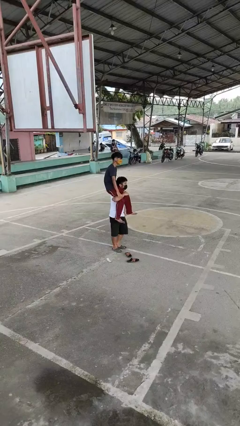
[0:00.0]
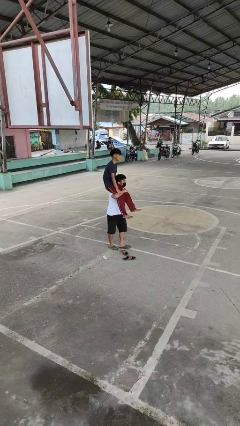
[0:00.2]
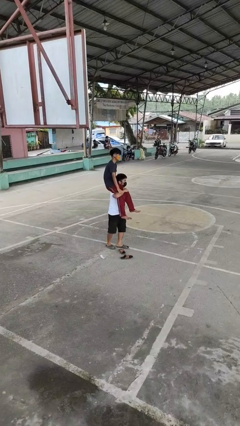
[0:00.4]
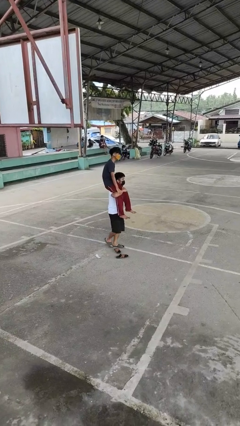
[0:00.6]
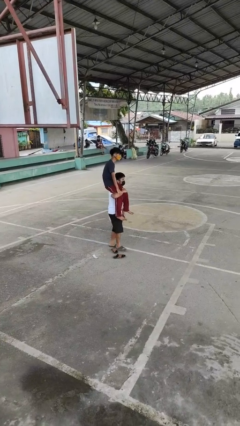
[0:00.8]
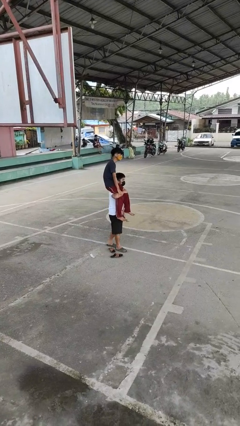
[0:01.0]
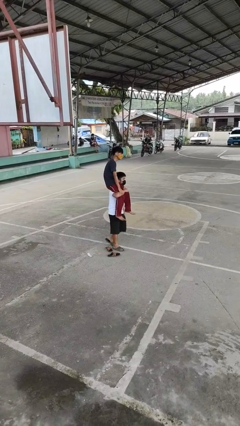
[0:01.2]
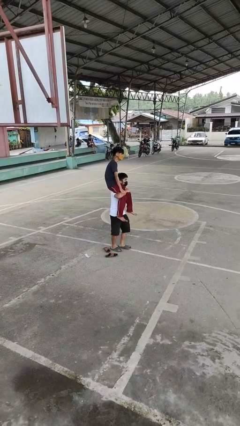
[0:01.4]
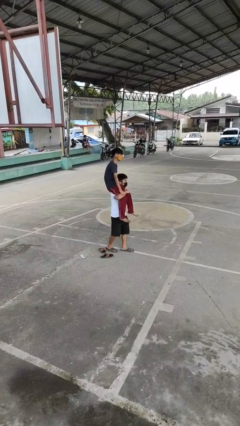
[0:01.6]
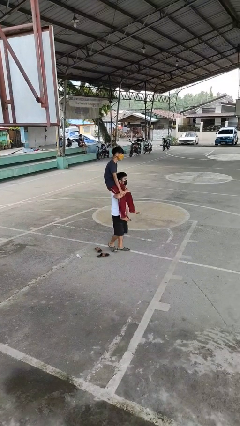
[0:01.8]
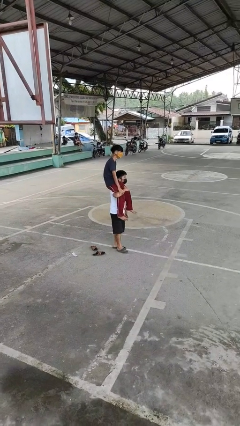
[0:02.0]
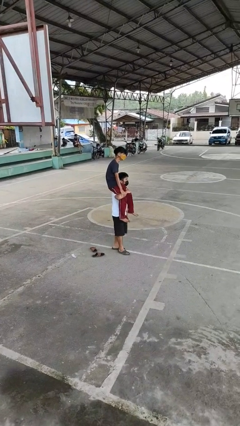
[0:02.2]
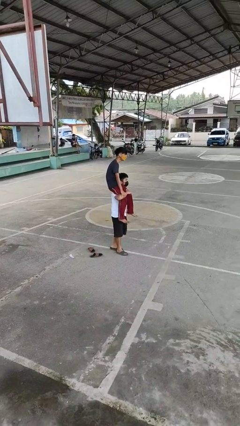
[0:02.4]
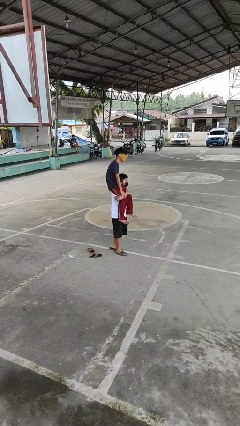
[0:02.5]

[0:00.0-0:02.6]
person carries person on shoulders

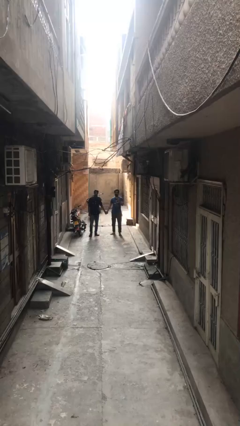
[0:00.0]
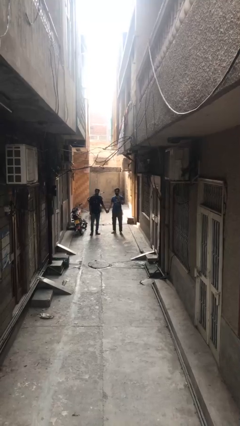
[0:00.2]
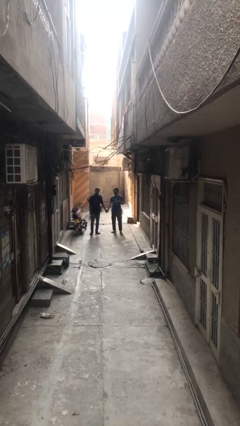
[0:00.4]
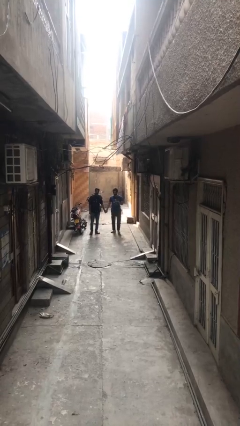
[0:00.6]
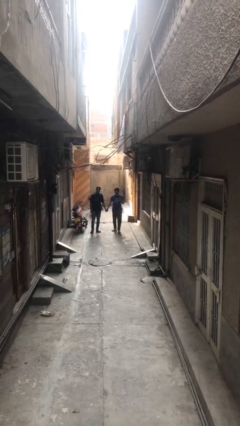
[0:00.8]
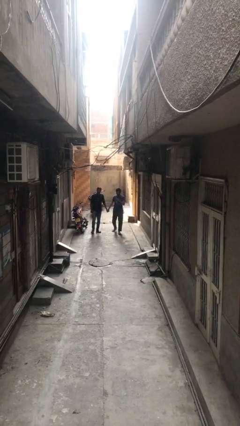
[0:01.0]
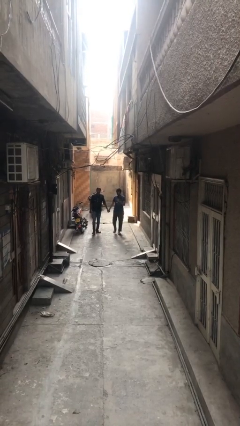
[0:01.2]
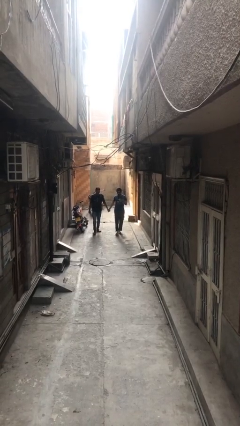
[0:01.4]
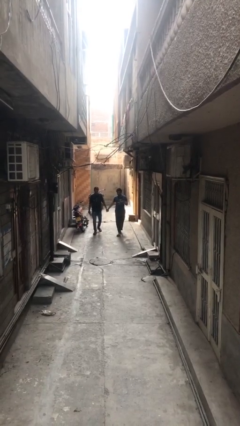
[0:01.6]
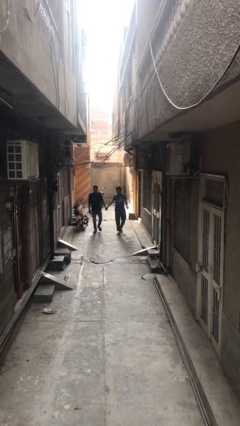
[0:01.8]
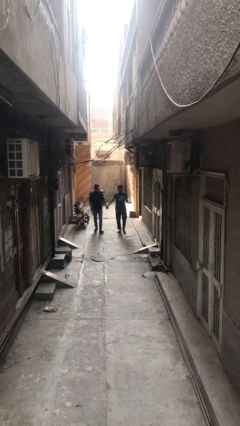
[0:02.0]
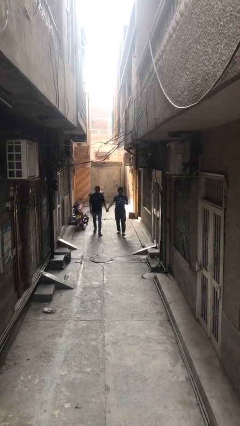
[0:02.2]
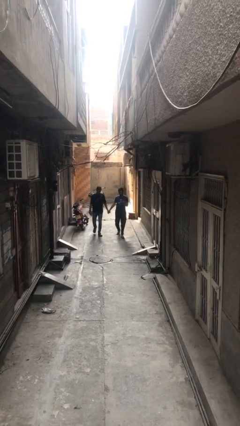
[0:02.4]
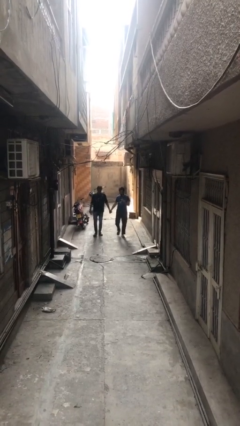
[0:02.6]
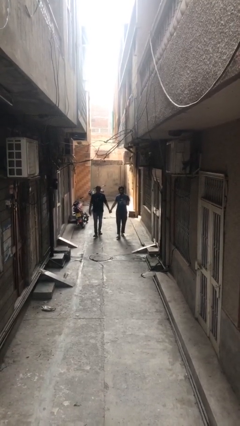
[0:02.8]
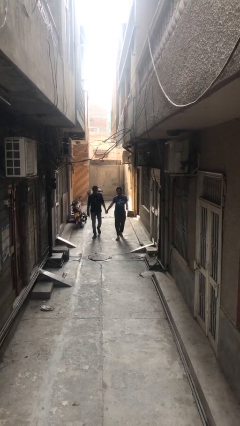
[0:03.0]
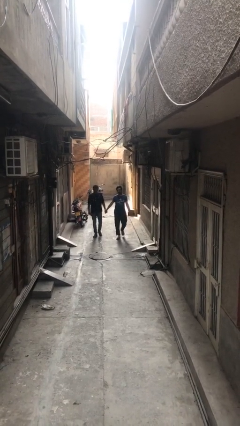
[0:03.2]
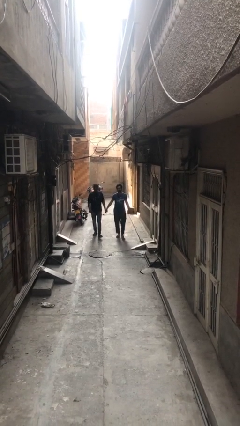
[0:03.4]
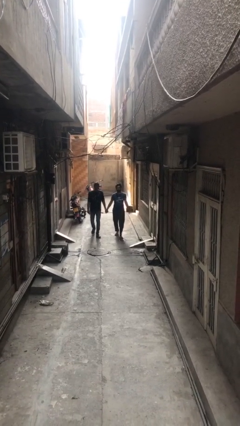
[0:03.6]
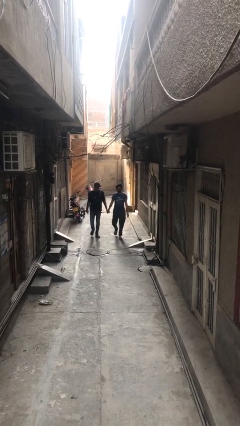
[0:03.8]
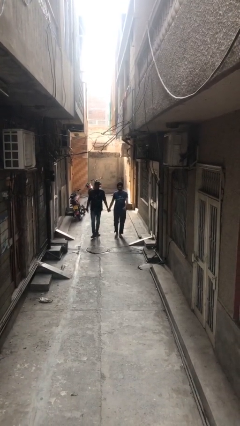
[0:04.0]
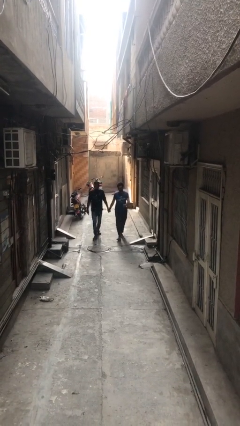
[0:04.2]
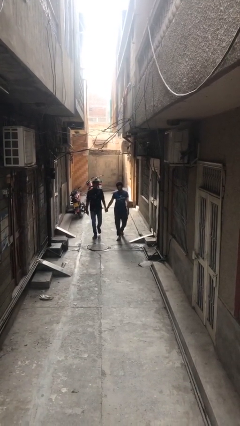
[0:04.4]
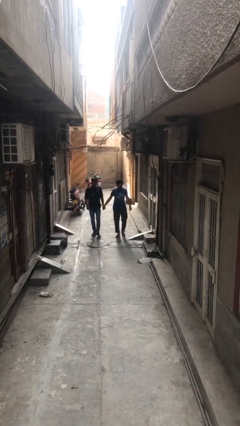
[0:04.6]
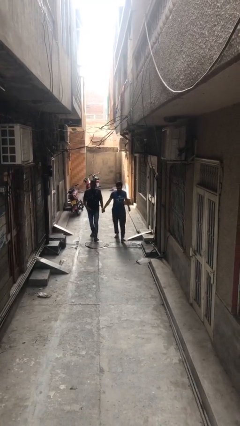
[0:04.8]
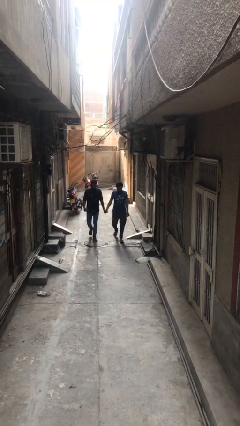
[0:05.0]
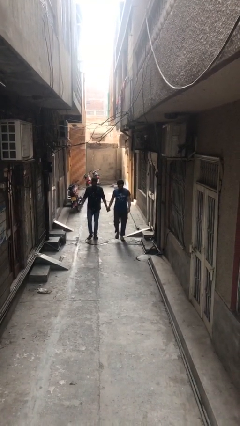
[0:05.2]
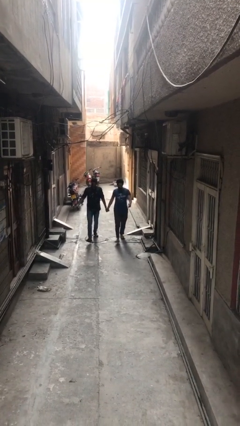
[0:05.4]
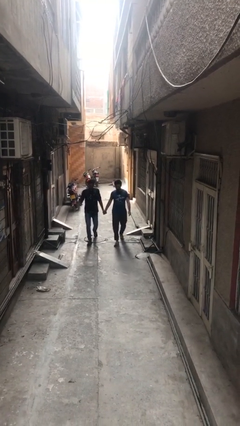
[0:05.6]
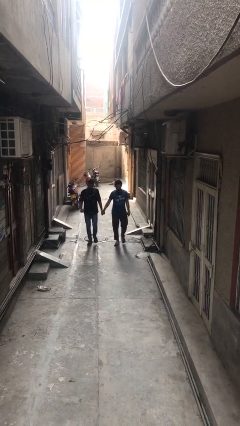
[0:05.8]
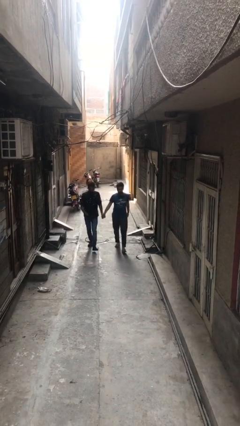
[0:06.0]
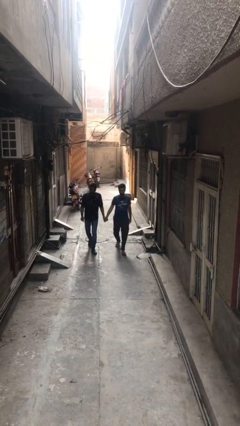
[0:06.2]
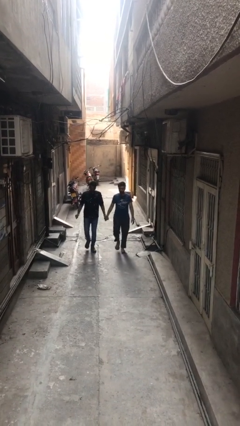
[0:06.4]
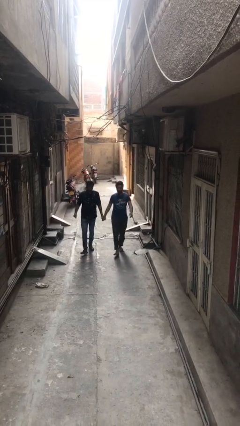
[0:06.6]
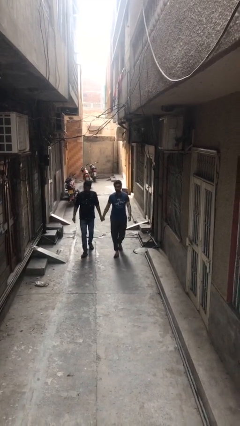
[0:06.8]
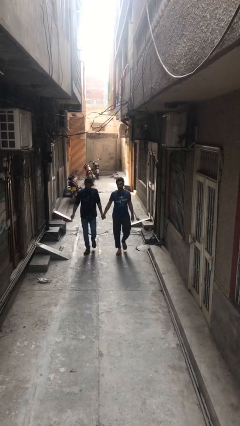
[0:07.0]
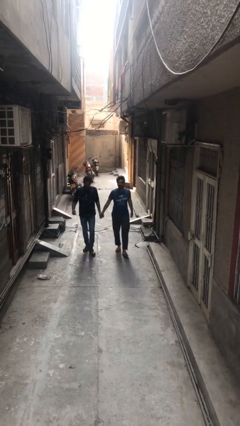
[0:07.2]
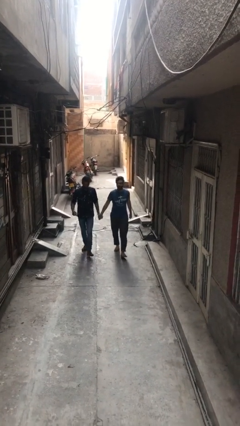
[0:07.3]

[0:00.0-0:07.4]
person holds hand

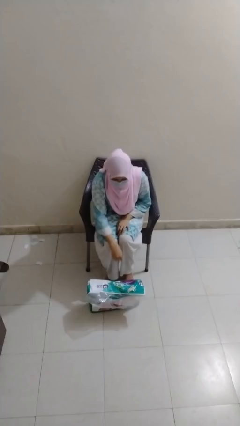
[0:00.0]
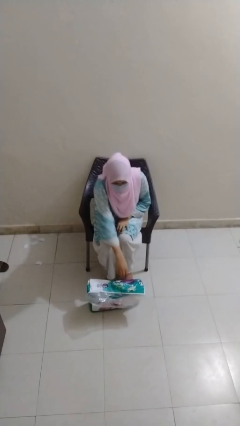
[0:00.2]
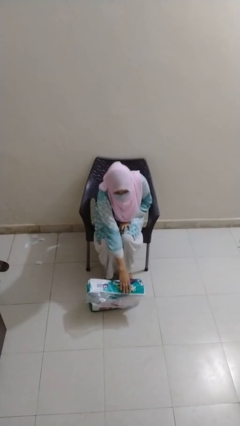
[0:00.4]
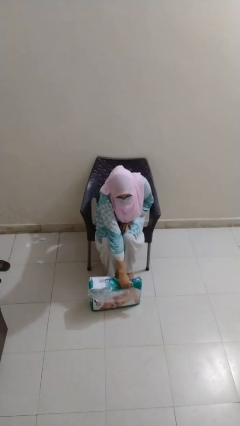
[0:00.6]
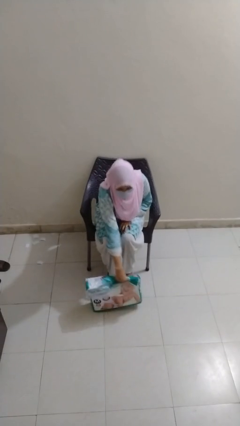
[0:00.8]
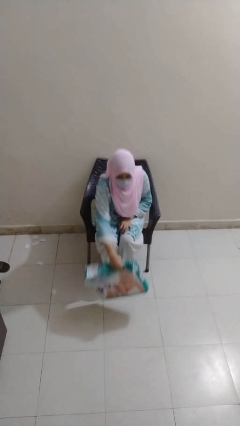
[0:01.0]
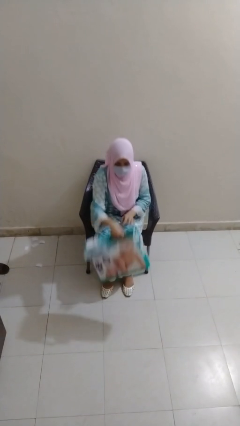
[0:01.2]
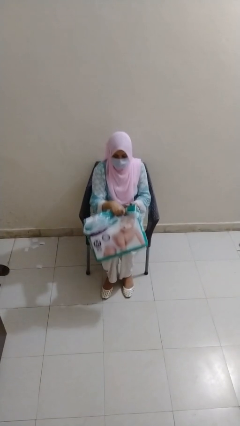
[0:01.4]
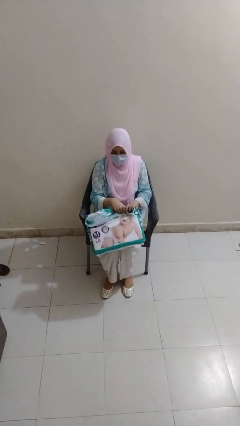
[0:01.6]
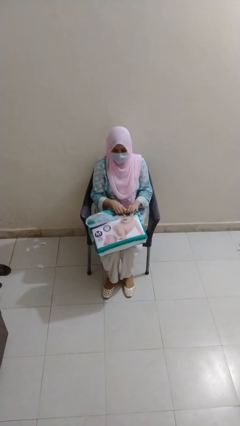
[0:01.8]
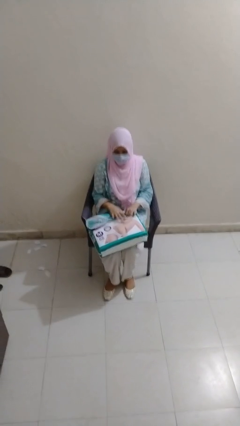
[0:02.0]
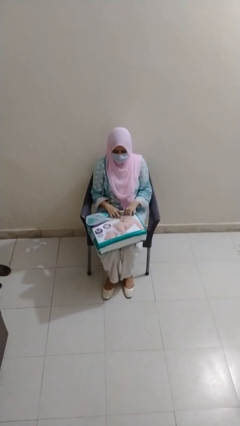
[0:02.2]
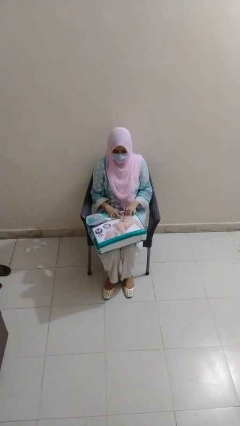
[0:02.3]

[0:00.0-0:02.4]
person picks up object from floor

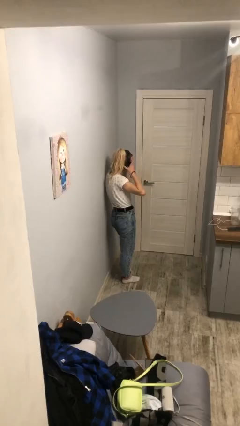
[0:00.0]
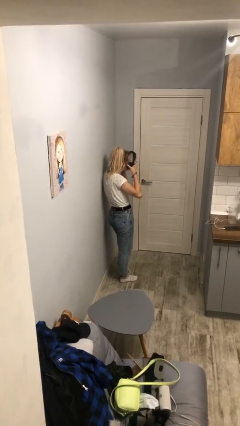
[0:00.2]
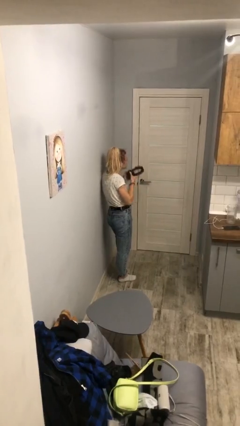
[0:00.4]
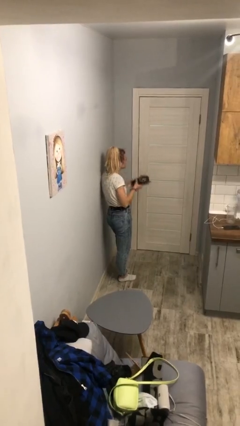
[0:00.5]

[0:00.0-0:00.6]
person takes off headphones

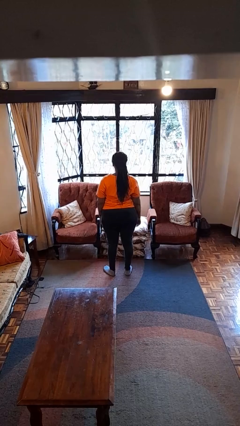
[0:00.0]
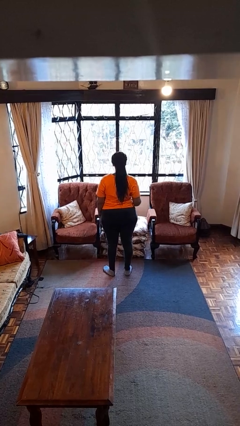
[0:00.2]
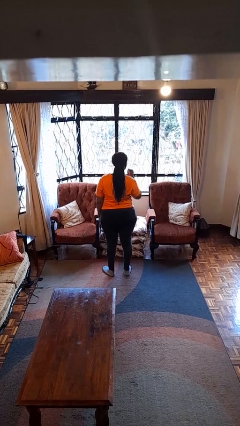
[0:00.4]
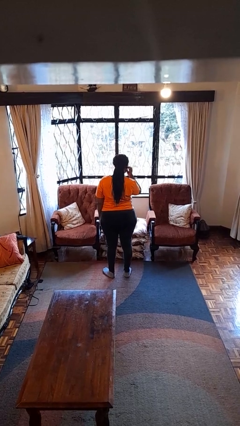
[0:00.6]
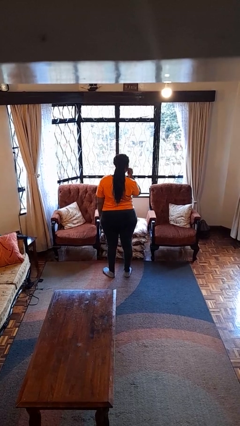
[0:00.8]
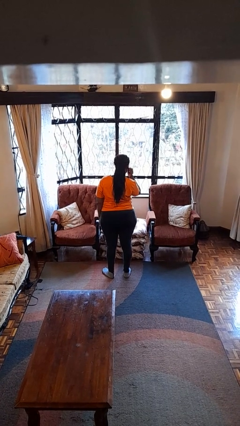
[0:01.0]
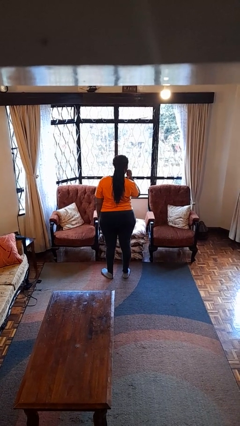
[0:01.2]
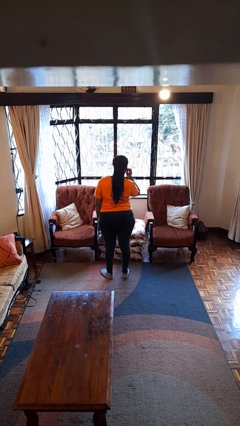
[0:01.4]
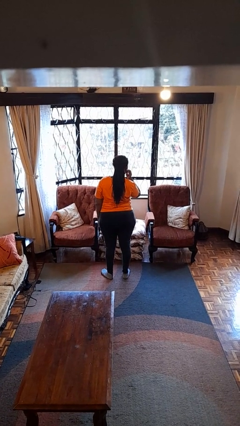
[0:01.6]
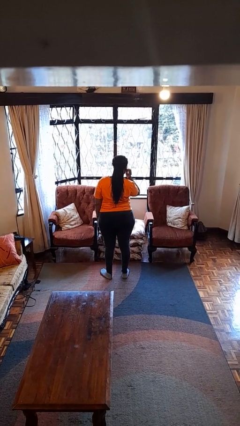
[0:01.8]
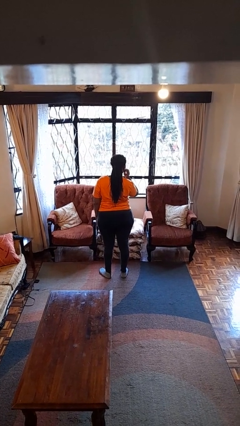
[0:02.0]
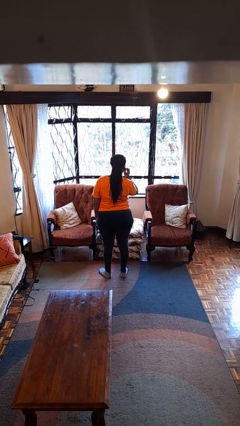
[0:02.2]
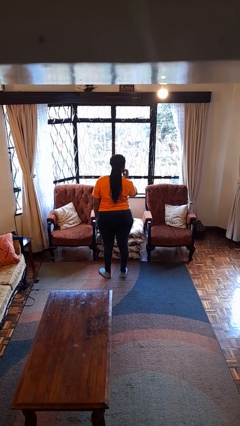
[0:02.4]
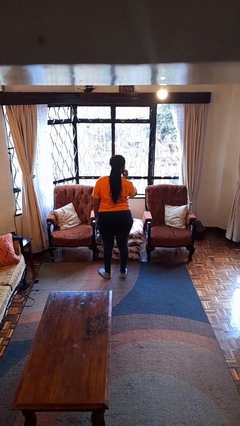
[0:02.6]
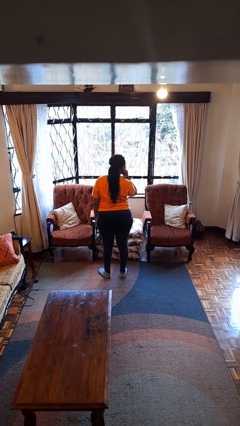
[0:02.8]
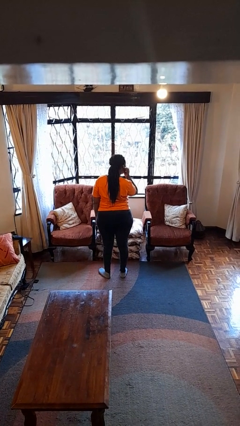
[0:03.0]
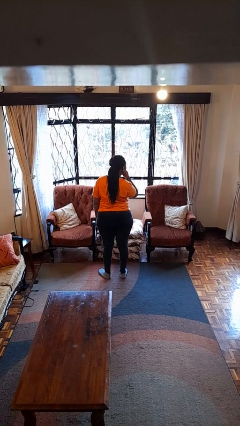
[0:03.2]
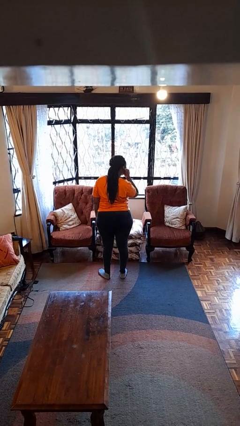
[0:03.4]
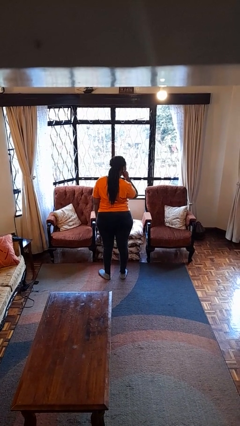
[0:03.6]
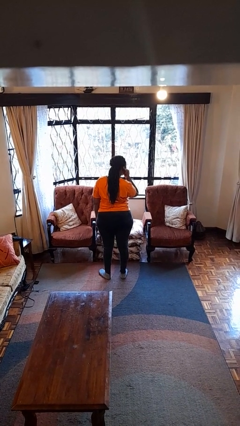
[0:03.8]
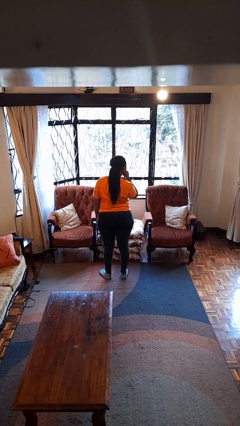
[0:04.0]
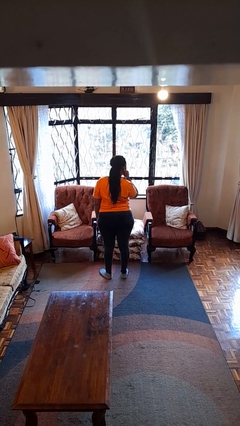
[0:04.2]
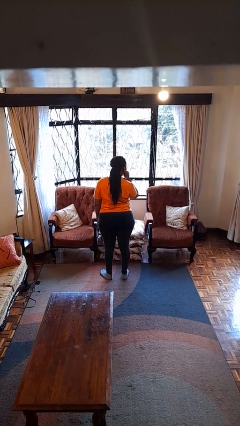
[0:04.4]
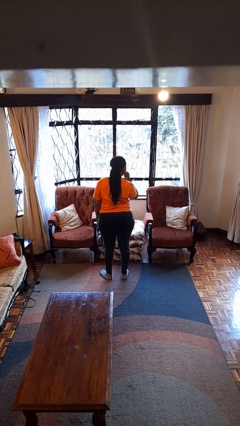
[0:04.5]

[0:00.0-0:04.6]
person touches earlobe

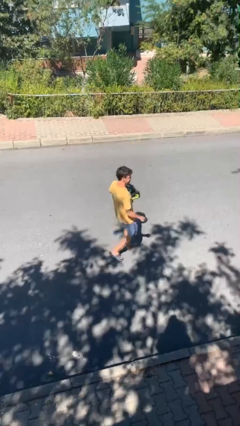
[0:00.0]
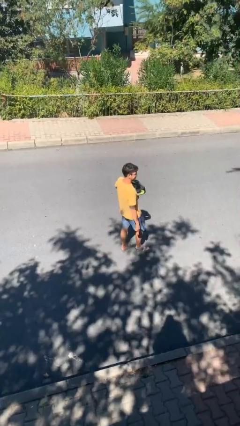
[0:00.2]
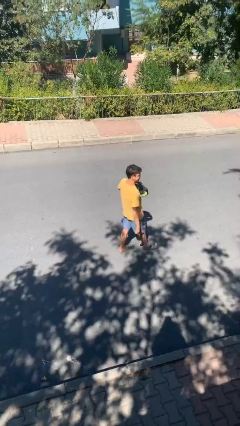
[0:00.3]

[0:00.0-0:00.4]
person steals object from person
